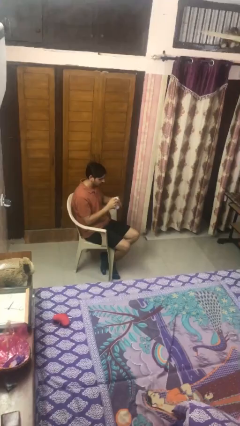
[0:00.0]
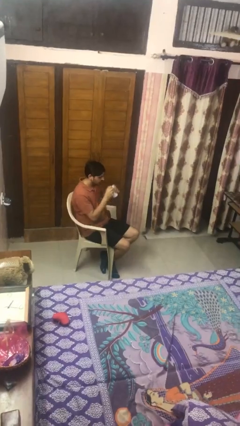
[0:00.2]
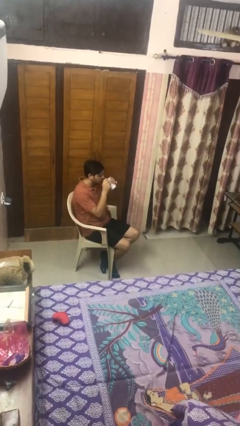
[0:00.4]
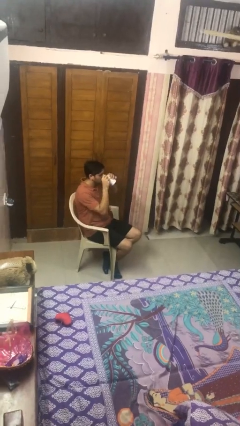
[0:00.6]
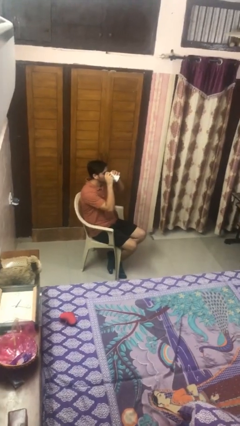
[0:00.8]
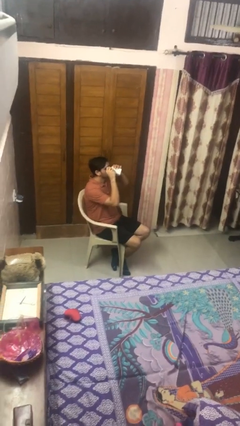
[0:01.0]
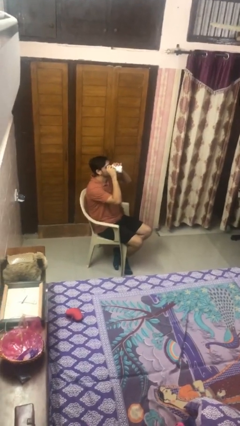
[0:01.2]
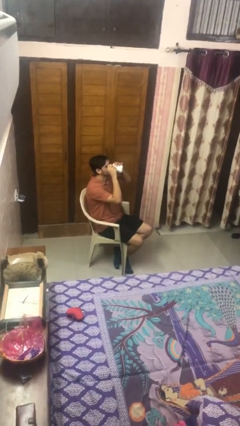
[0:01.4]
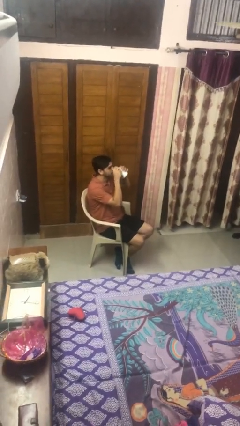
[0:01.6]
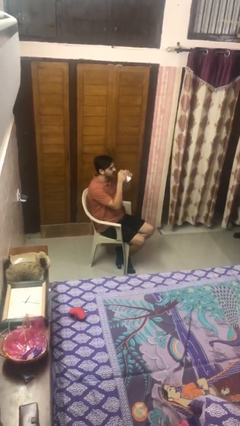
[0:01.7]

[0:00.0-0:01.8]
person drinks from mug

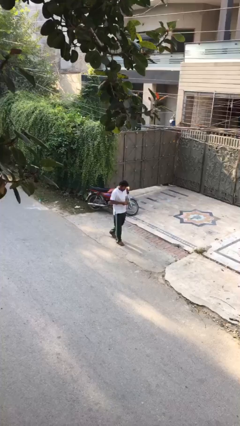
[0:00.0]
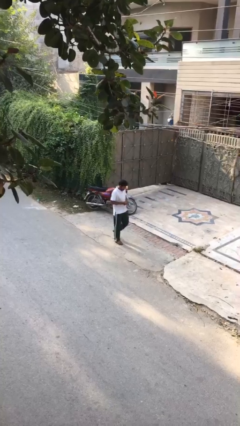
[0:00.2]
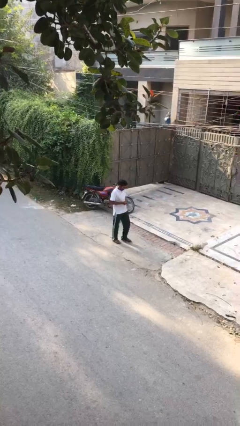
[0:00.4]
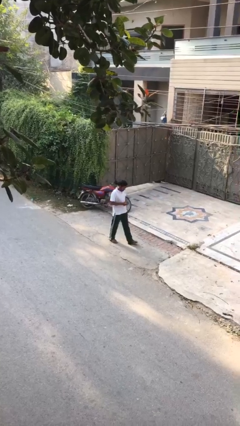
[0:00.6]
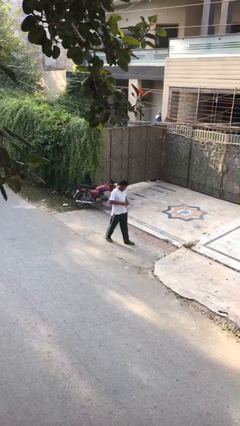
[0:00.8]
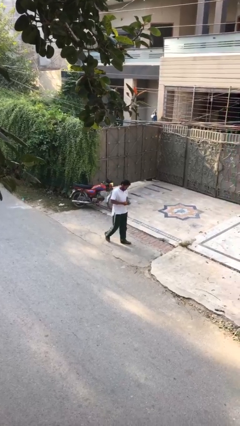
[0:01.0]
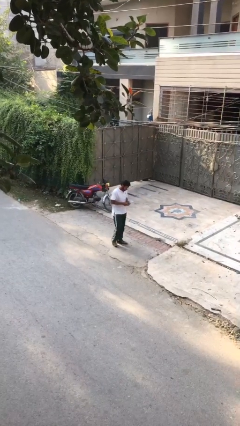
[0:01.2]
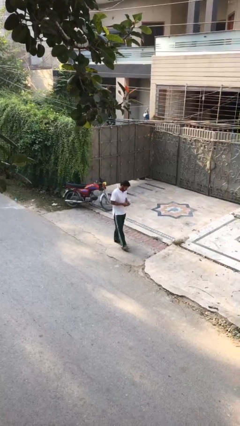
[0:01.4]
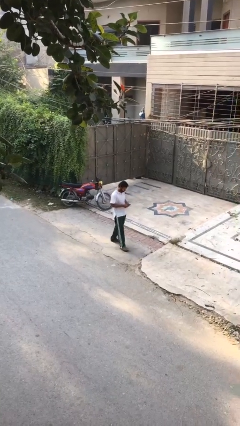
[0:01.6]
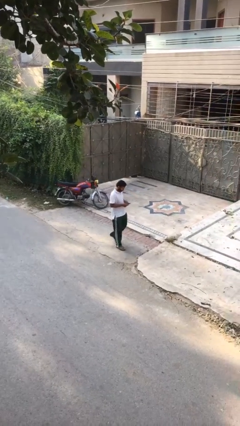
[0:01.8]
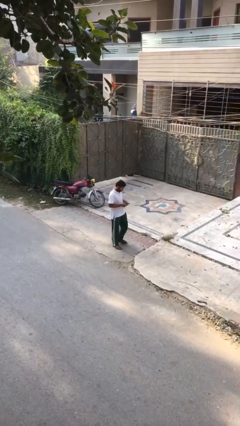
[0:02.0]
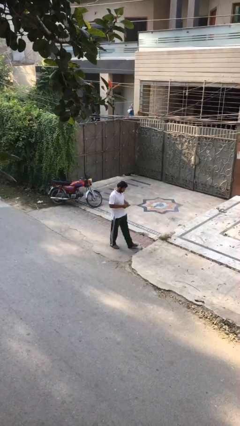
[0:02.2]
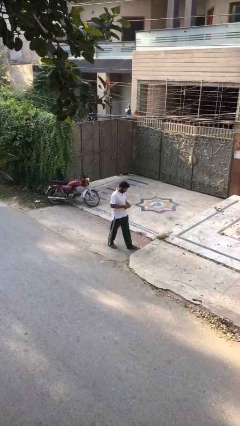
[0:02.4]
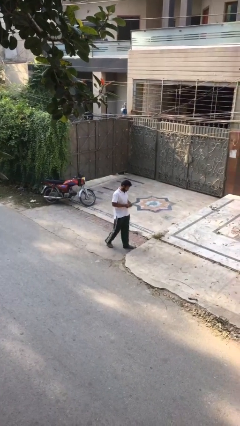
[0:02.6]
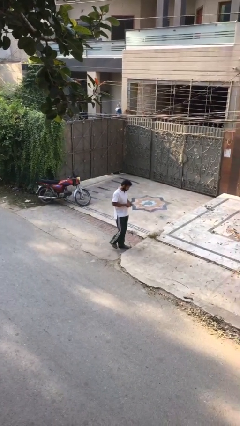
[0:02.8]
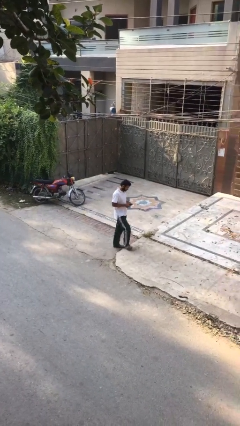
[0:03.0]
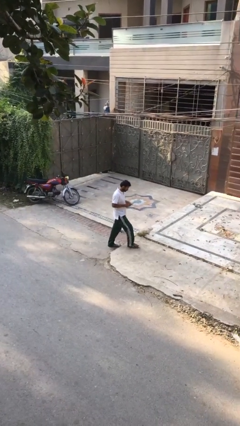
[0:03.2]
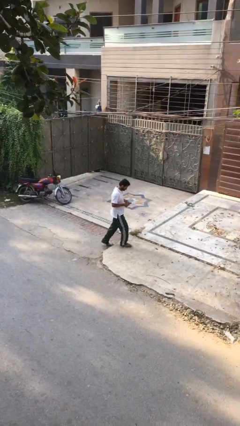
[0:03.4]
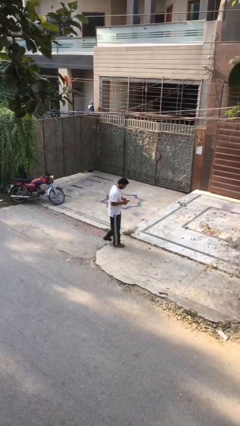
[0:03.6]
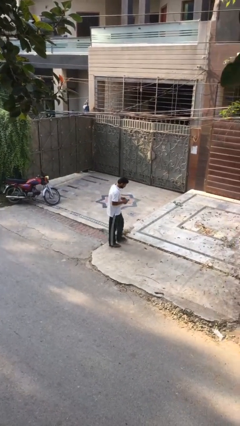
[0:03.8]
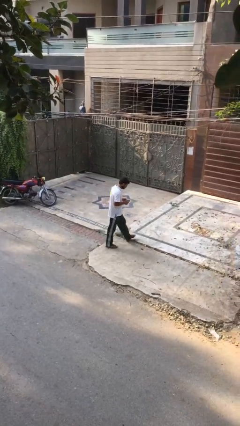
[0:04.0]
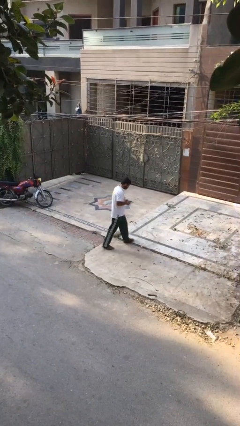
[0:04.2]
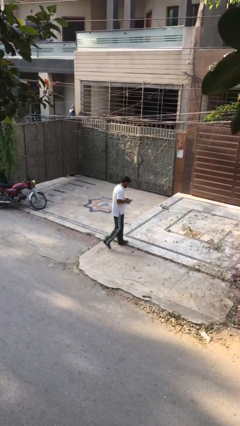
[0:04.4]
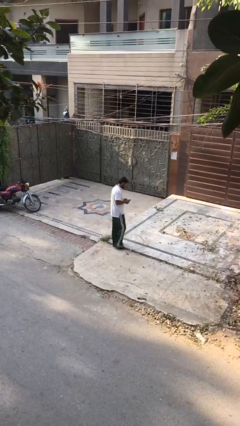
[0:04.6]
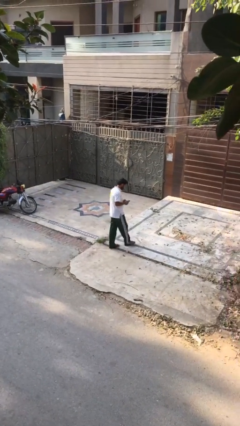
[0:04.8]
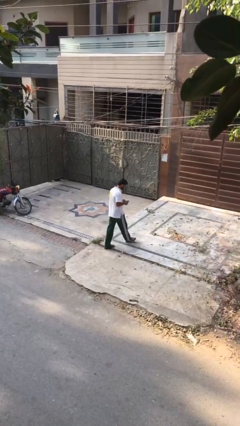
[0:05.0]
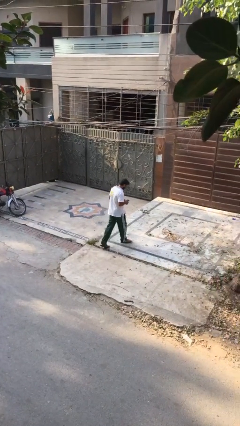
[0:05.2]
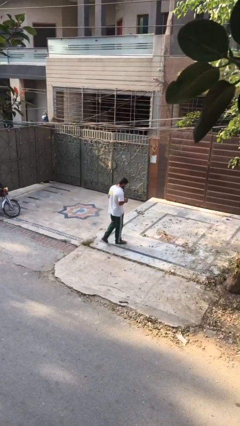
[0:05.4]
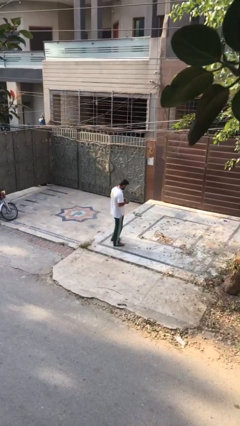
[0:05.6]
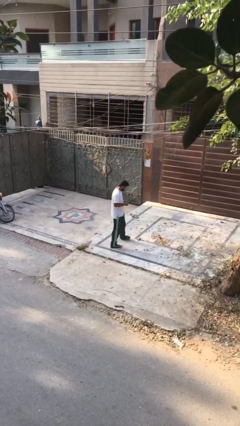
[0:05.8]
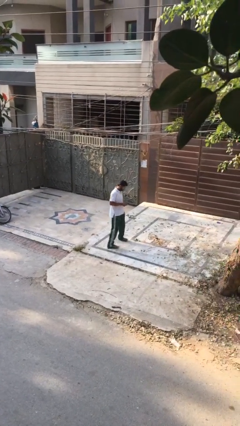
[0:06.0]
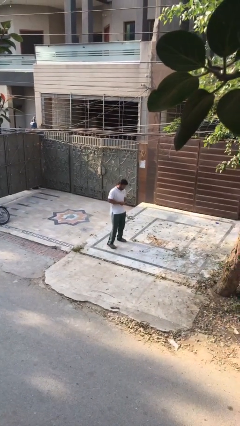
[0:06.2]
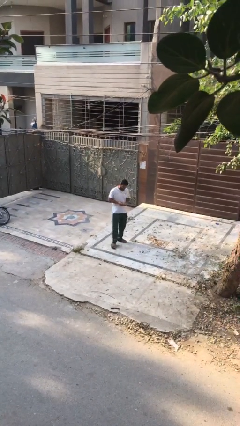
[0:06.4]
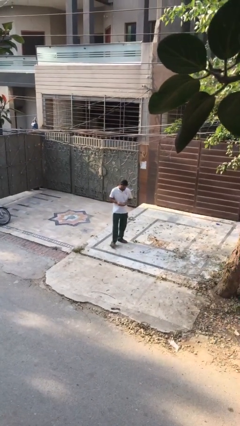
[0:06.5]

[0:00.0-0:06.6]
person texts on phone

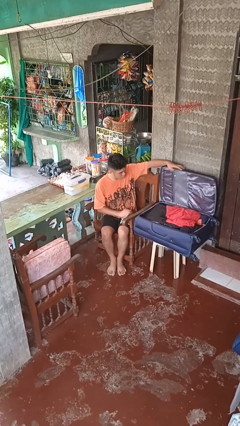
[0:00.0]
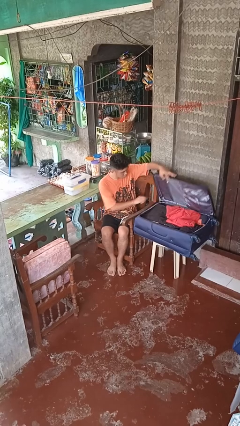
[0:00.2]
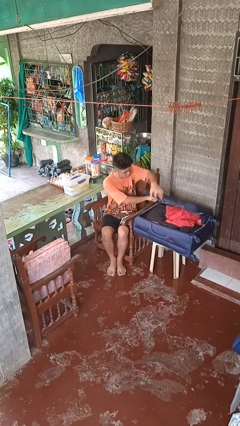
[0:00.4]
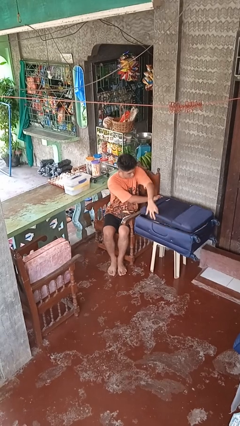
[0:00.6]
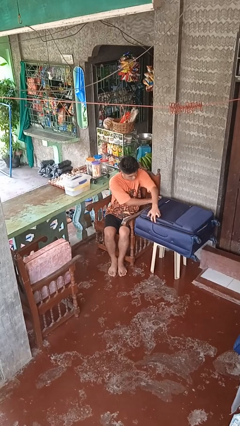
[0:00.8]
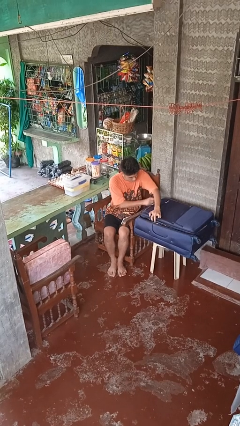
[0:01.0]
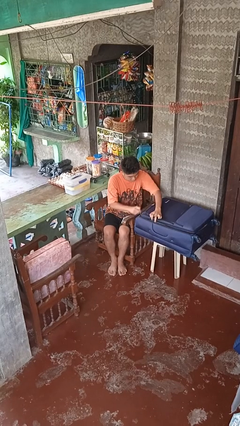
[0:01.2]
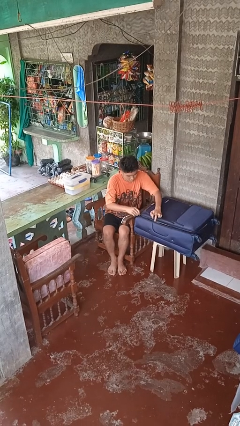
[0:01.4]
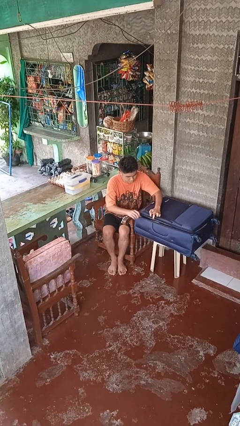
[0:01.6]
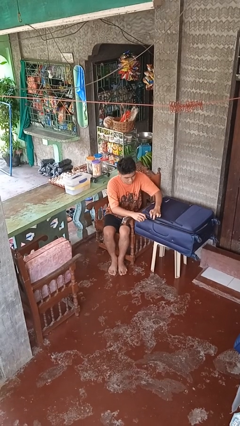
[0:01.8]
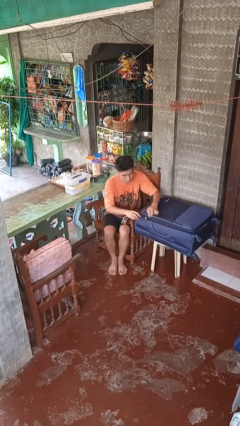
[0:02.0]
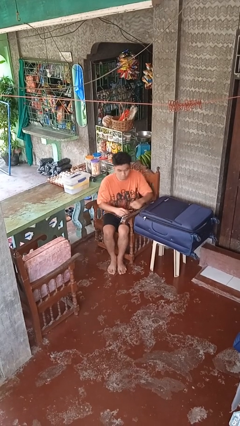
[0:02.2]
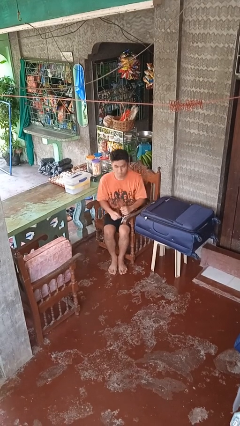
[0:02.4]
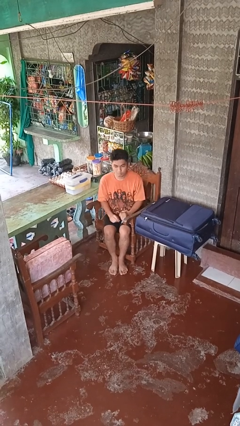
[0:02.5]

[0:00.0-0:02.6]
person closes suitcase

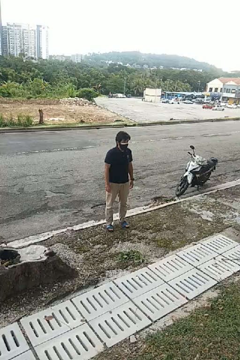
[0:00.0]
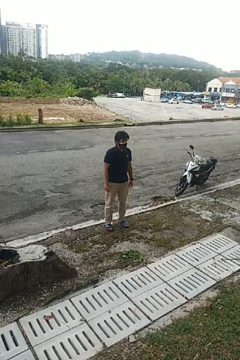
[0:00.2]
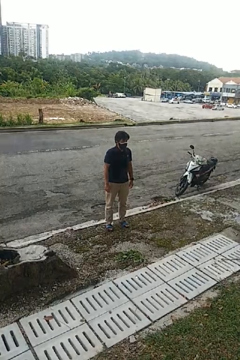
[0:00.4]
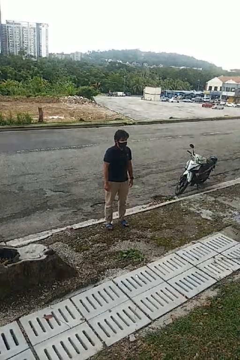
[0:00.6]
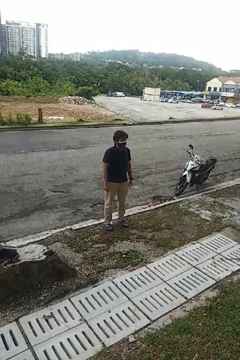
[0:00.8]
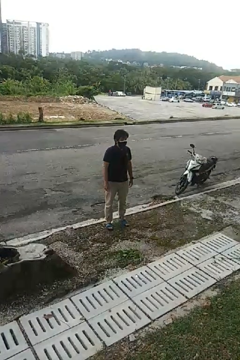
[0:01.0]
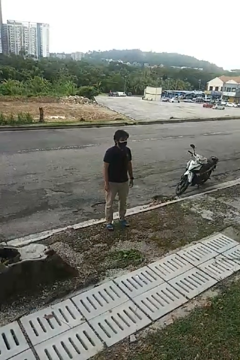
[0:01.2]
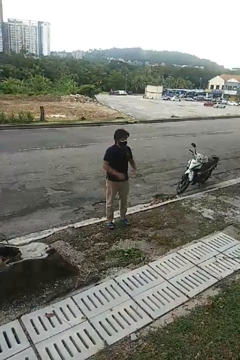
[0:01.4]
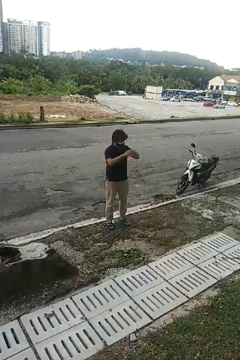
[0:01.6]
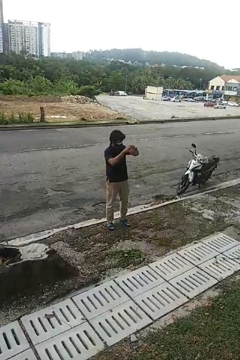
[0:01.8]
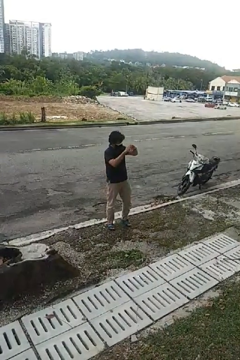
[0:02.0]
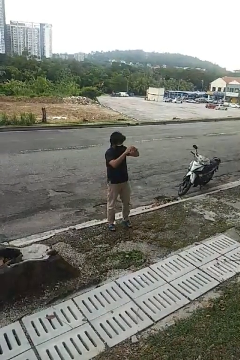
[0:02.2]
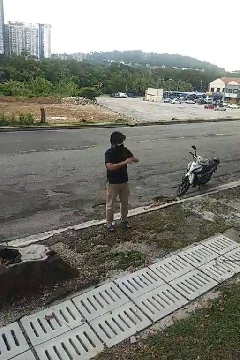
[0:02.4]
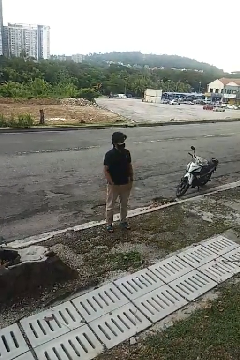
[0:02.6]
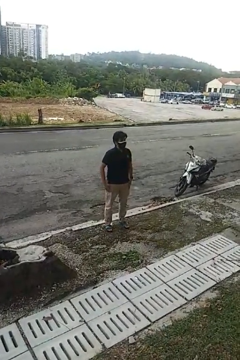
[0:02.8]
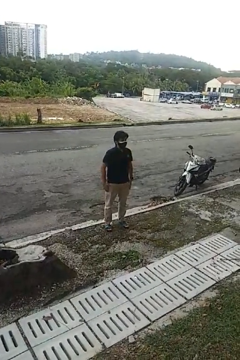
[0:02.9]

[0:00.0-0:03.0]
person gestures heart

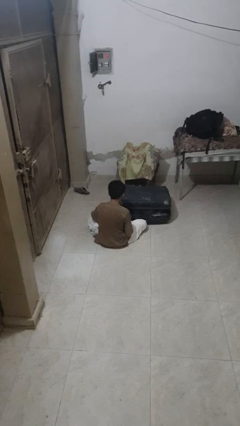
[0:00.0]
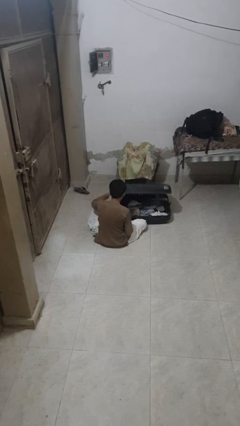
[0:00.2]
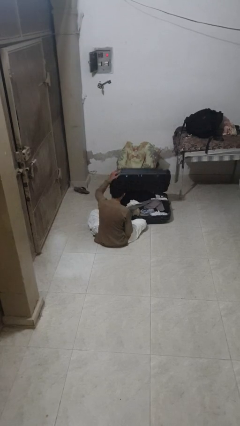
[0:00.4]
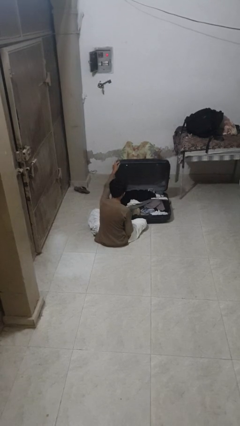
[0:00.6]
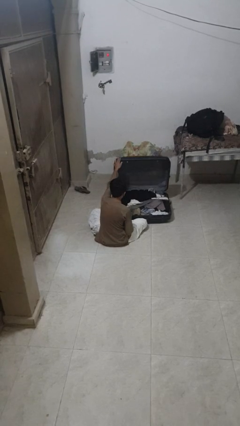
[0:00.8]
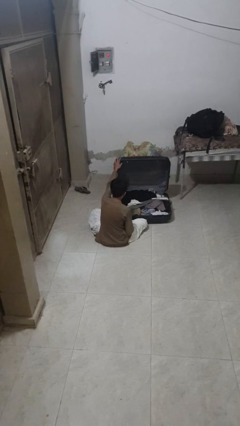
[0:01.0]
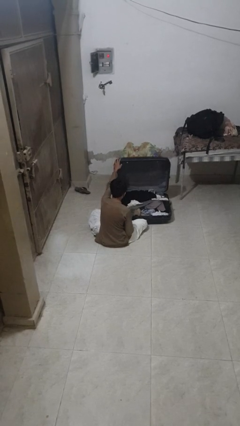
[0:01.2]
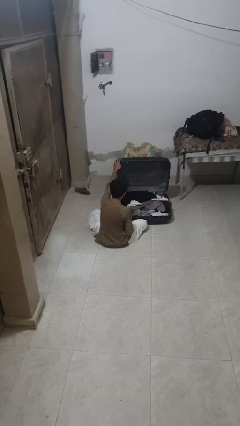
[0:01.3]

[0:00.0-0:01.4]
person opens suitcase

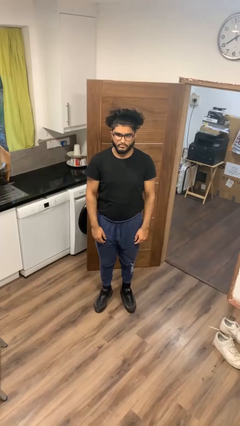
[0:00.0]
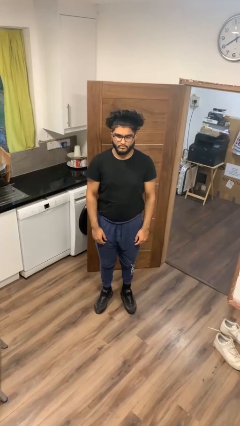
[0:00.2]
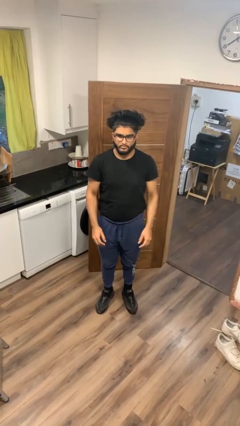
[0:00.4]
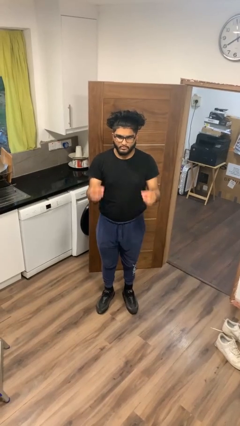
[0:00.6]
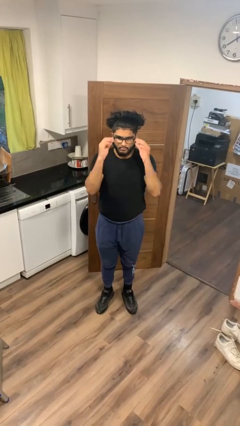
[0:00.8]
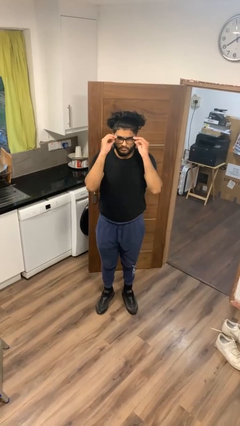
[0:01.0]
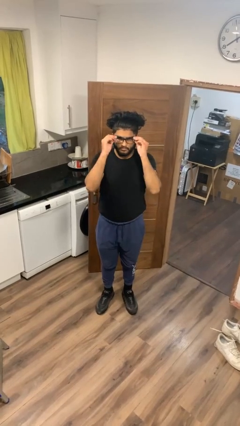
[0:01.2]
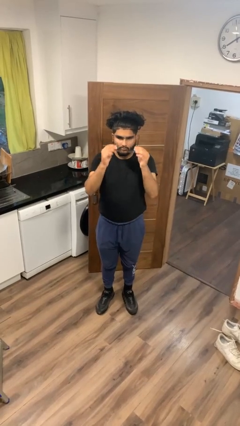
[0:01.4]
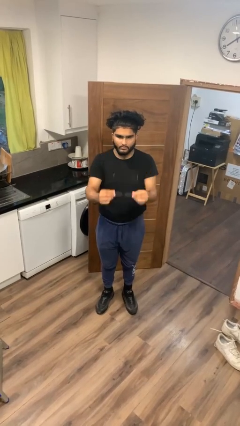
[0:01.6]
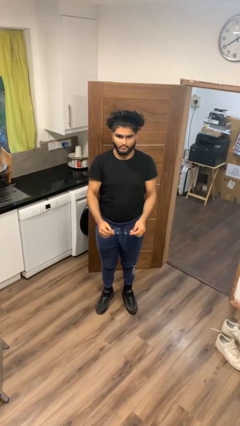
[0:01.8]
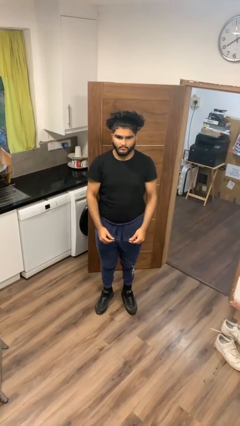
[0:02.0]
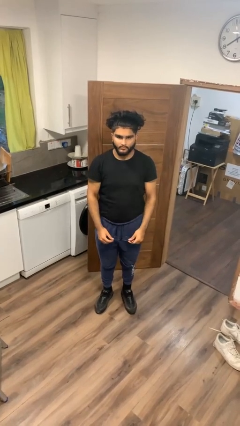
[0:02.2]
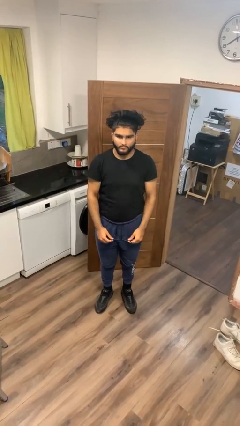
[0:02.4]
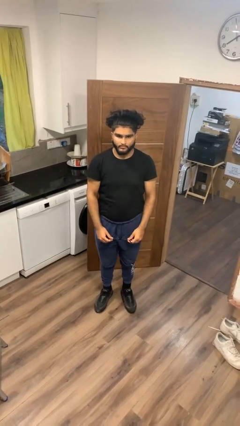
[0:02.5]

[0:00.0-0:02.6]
person takes off glasses
